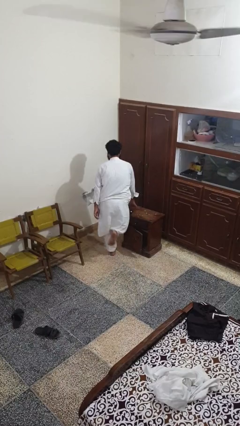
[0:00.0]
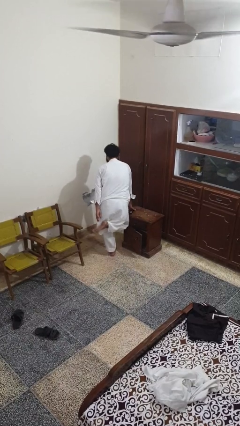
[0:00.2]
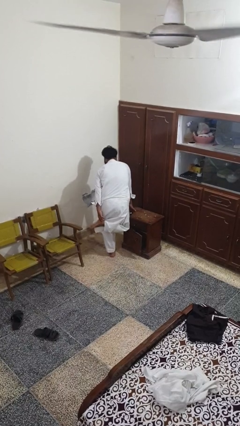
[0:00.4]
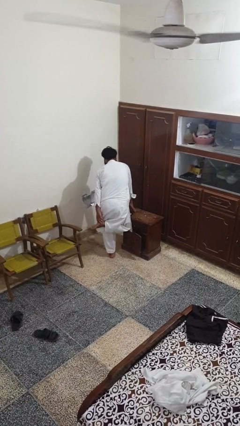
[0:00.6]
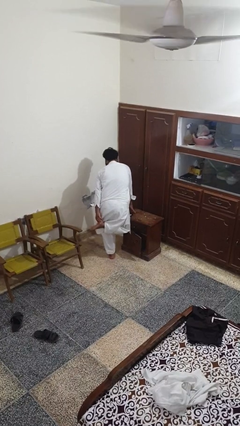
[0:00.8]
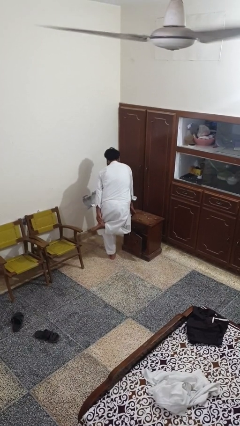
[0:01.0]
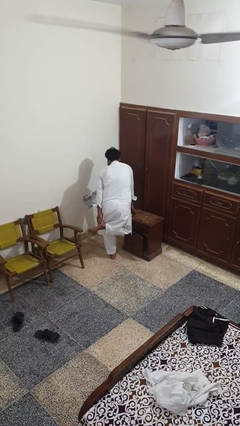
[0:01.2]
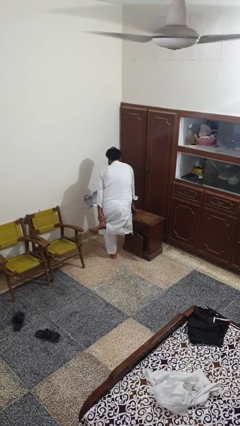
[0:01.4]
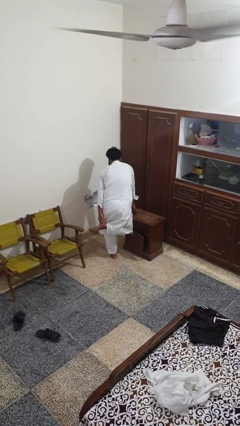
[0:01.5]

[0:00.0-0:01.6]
person stubs toe

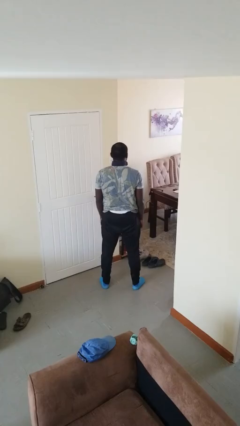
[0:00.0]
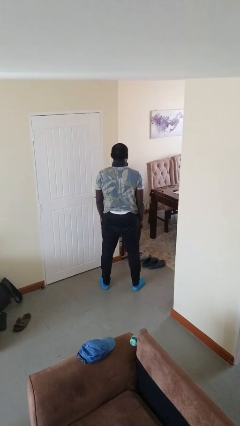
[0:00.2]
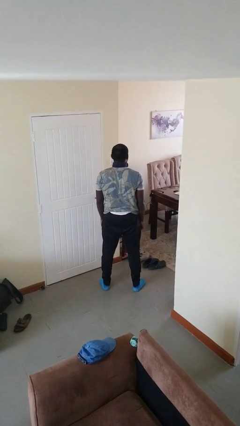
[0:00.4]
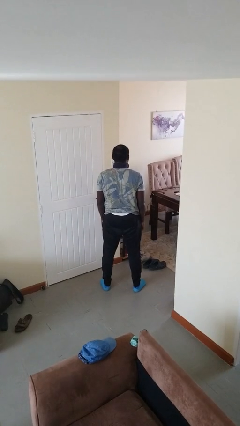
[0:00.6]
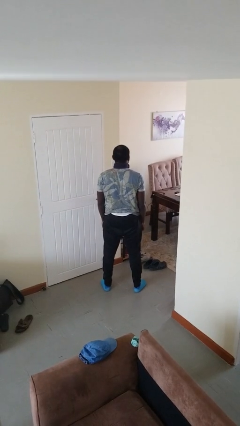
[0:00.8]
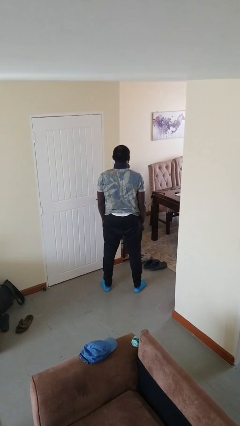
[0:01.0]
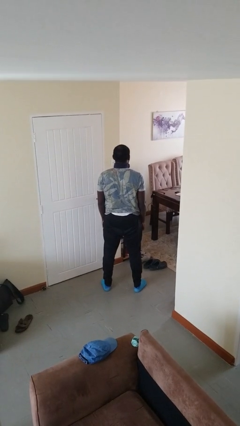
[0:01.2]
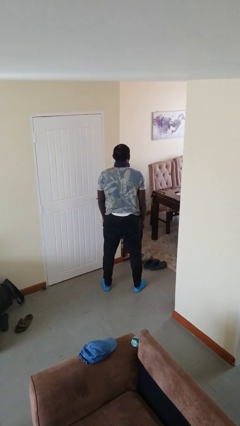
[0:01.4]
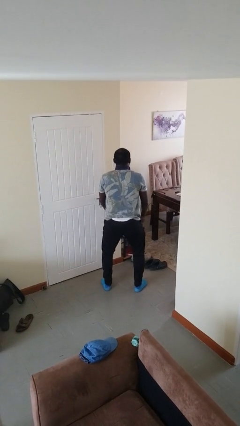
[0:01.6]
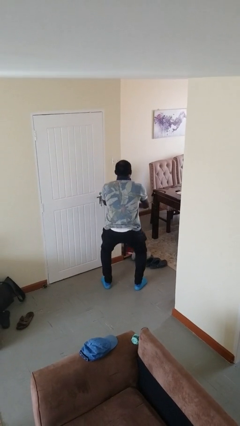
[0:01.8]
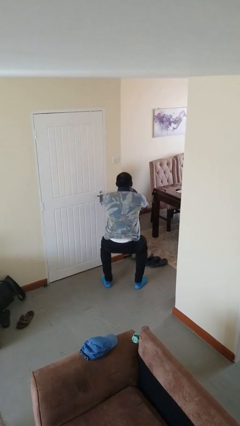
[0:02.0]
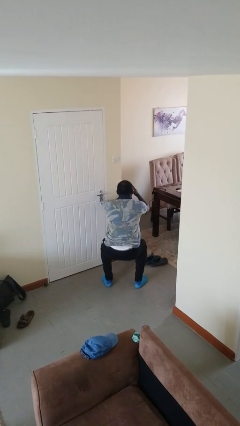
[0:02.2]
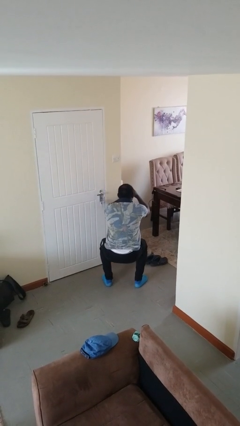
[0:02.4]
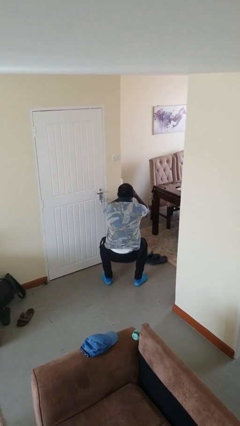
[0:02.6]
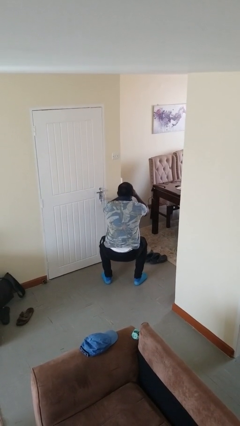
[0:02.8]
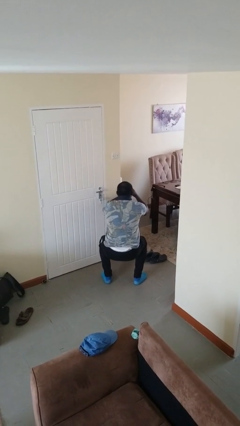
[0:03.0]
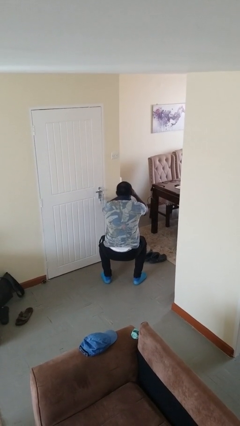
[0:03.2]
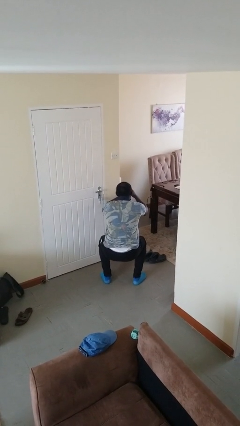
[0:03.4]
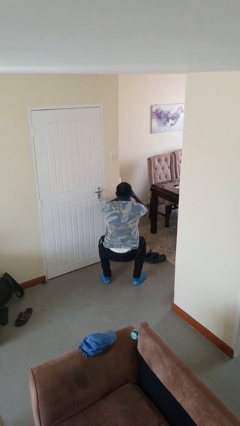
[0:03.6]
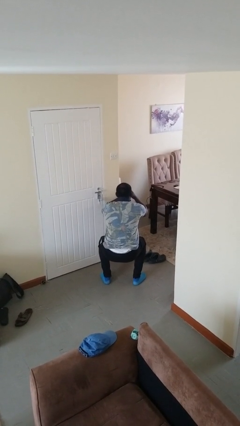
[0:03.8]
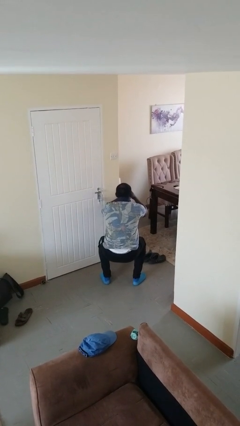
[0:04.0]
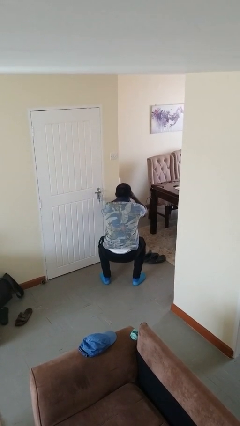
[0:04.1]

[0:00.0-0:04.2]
person squats

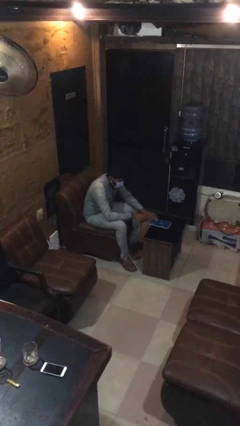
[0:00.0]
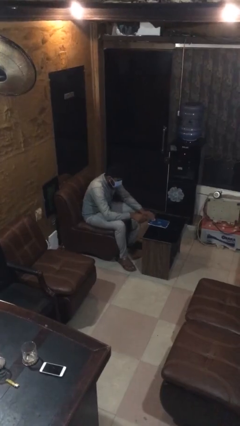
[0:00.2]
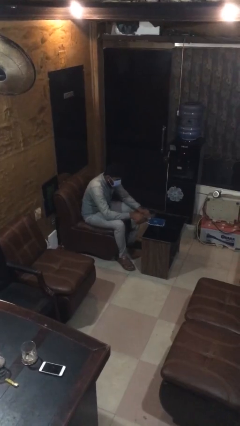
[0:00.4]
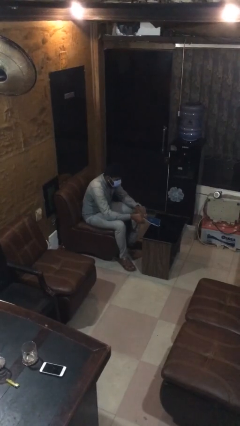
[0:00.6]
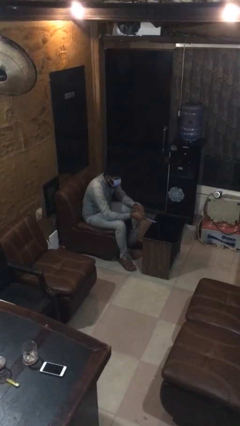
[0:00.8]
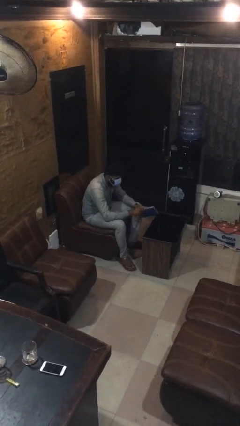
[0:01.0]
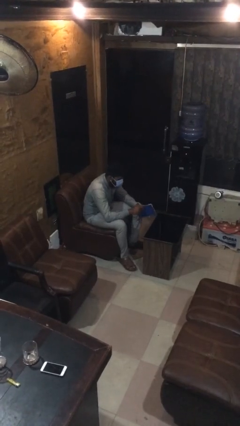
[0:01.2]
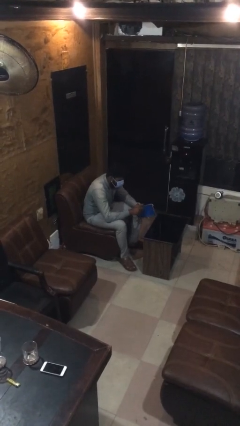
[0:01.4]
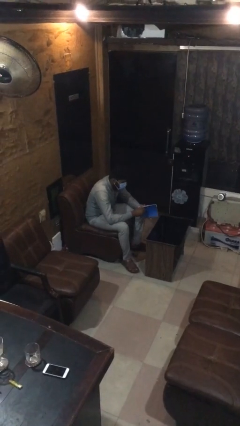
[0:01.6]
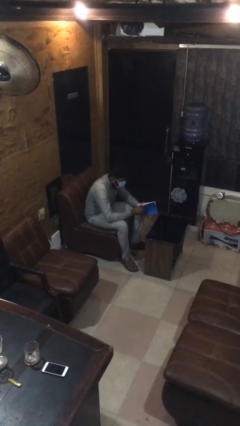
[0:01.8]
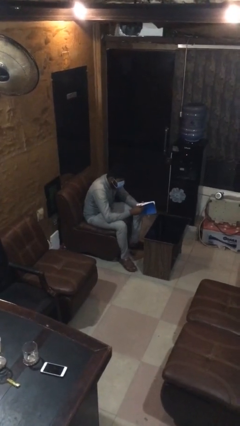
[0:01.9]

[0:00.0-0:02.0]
person picks up object from table

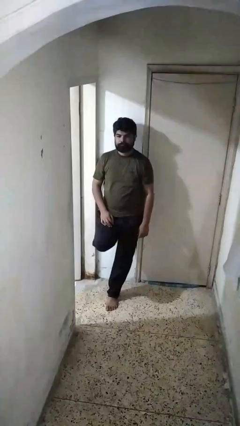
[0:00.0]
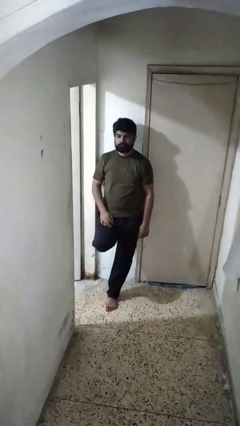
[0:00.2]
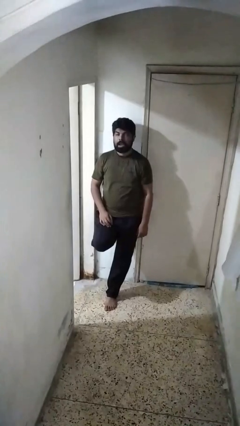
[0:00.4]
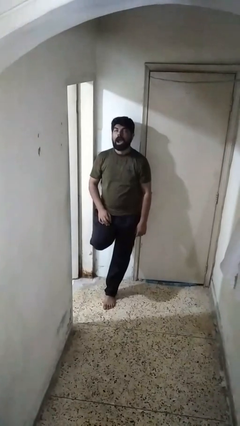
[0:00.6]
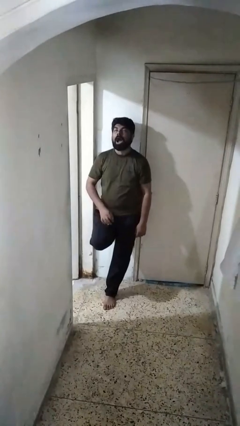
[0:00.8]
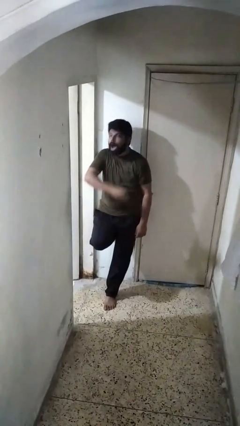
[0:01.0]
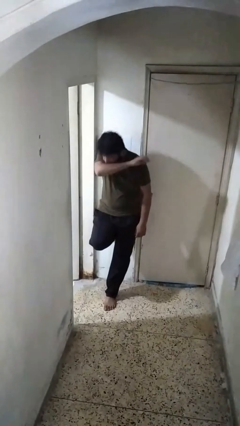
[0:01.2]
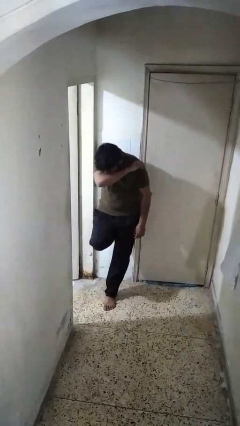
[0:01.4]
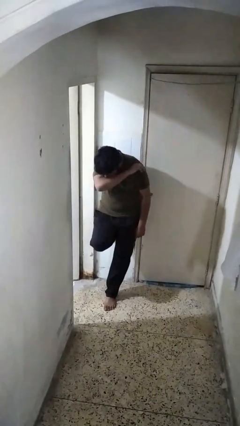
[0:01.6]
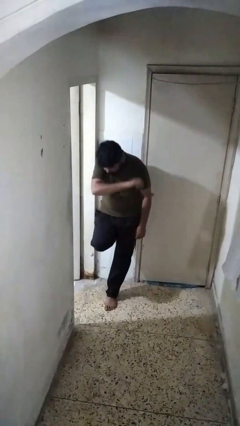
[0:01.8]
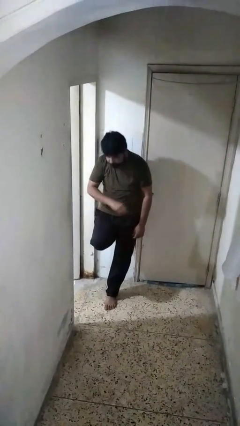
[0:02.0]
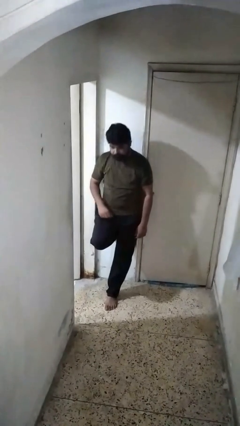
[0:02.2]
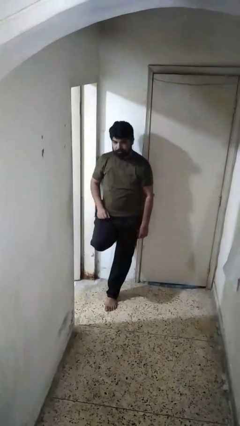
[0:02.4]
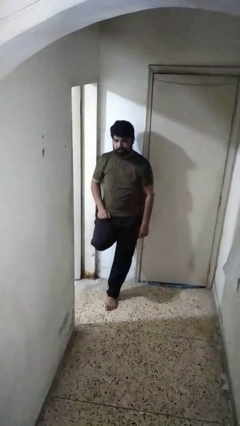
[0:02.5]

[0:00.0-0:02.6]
person sneezes into arm

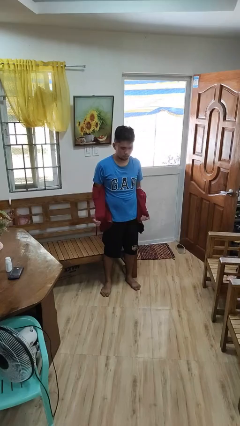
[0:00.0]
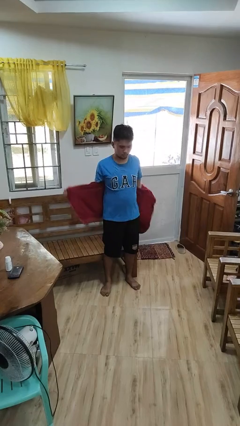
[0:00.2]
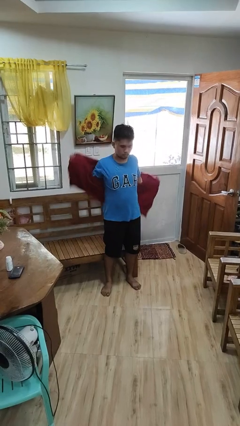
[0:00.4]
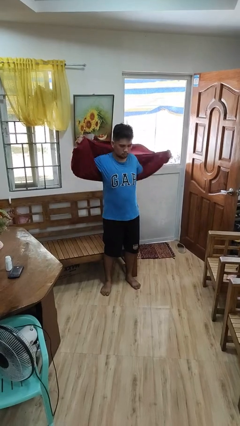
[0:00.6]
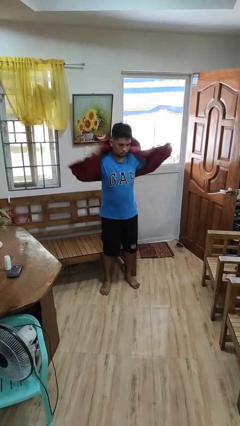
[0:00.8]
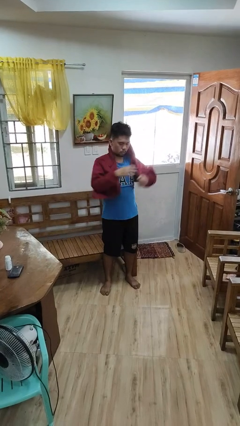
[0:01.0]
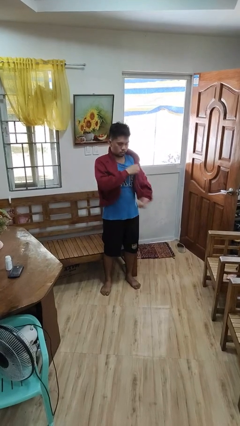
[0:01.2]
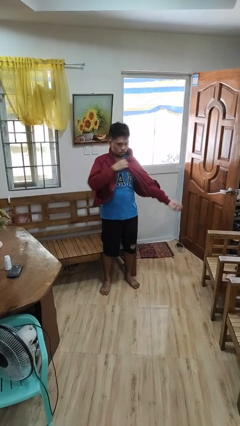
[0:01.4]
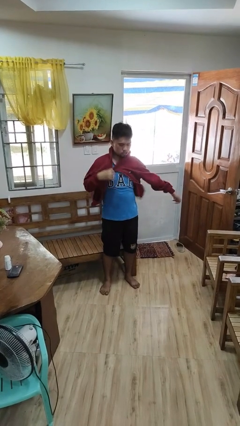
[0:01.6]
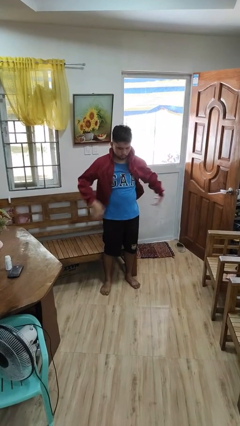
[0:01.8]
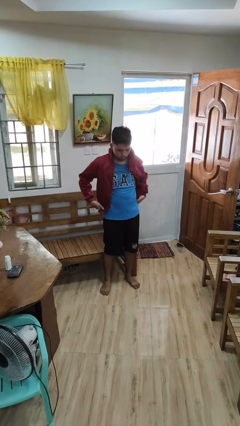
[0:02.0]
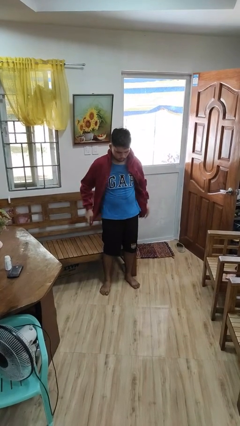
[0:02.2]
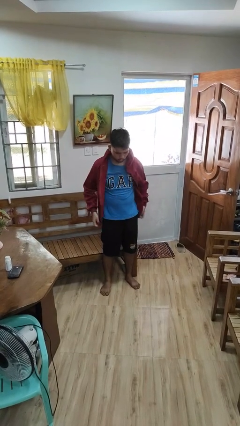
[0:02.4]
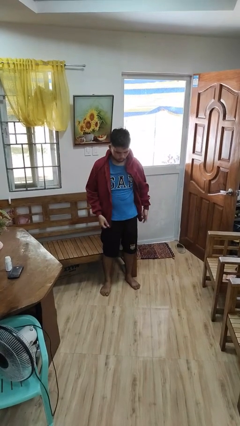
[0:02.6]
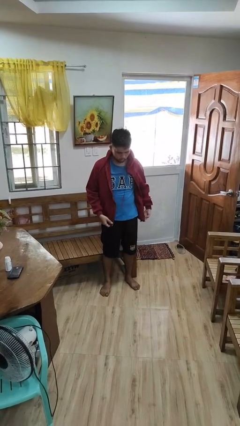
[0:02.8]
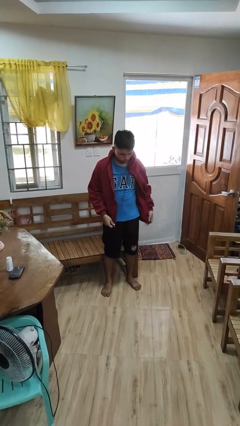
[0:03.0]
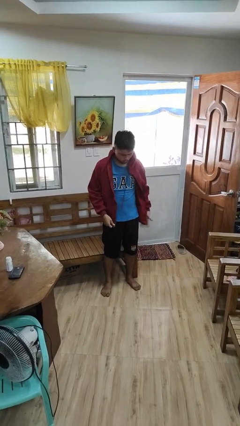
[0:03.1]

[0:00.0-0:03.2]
person puts on jacket

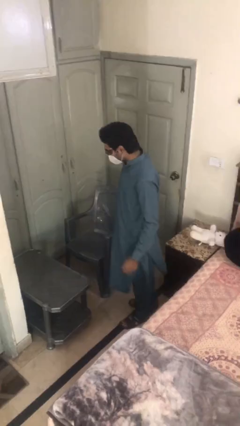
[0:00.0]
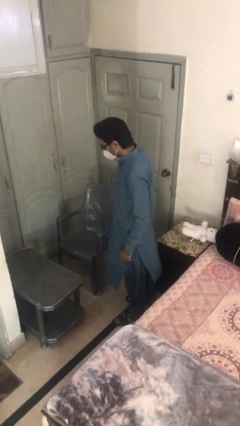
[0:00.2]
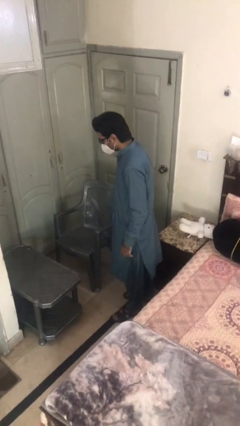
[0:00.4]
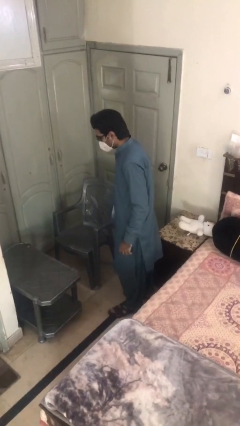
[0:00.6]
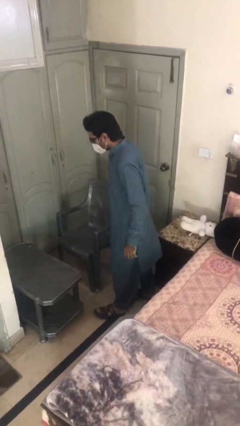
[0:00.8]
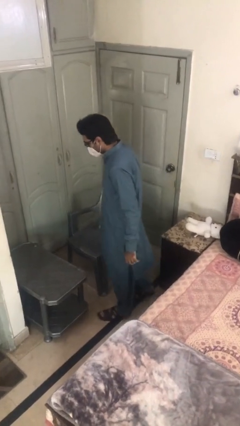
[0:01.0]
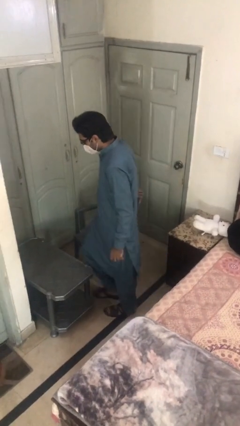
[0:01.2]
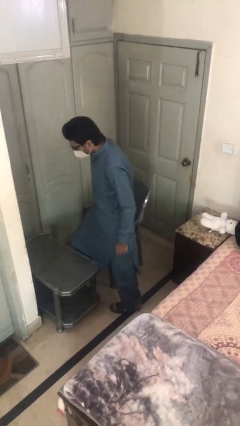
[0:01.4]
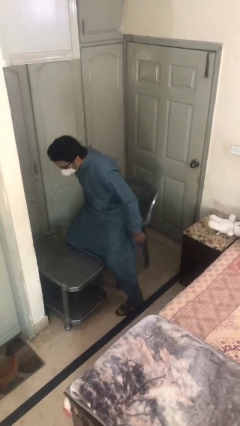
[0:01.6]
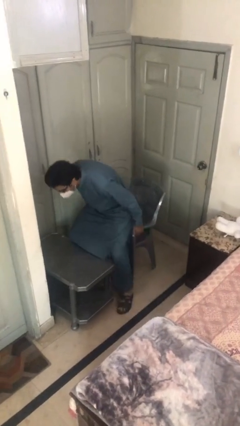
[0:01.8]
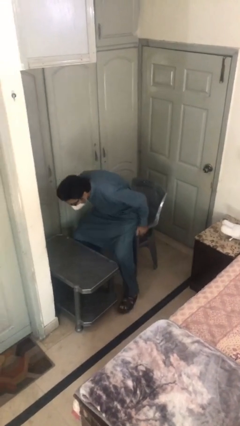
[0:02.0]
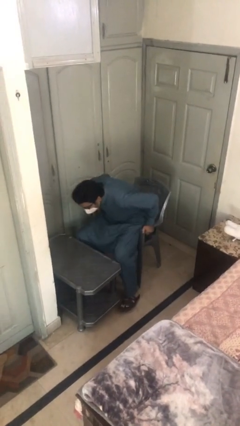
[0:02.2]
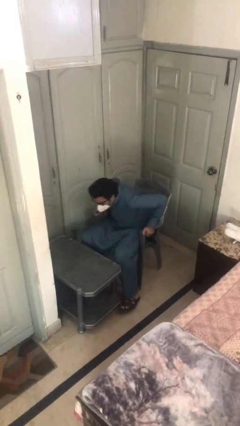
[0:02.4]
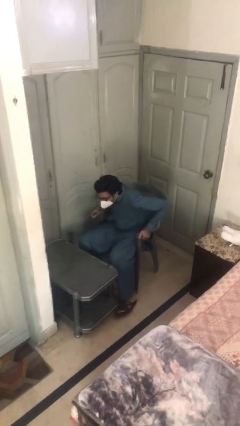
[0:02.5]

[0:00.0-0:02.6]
person sits down

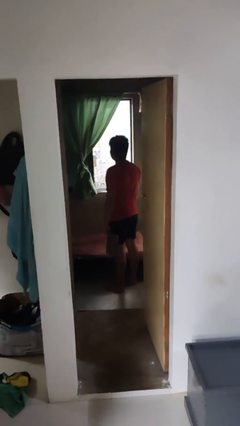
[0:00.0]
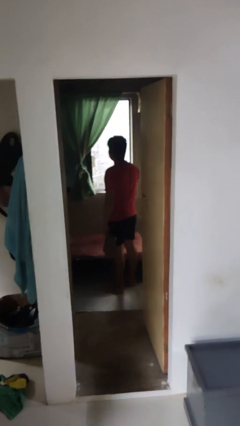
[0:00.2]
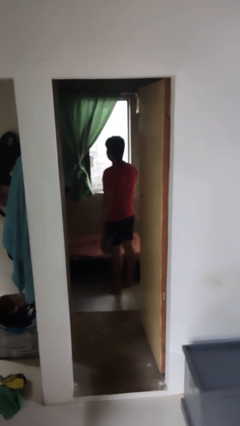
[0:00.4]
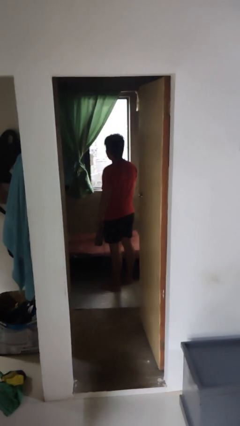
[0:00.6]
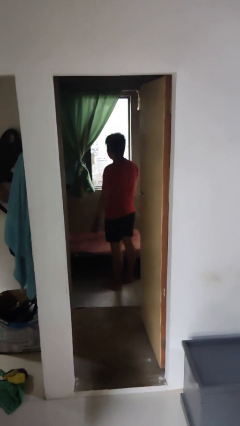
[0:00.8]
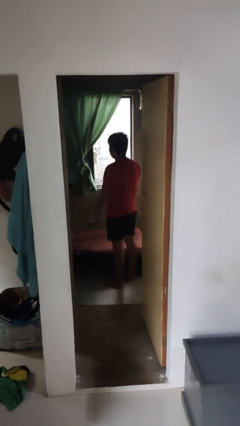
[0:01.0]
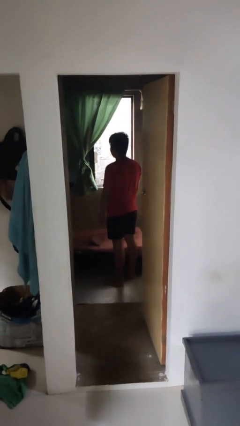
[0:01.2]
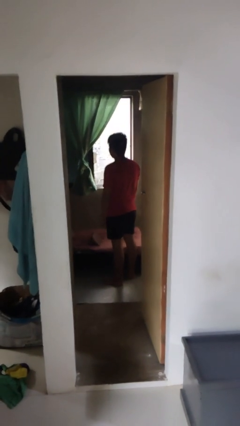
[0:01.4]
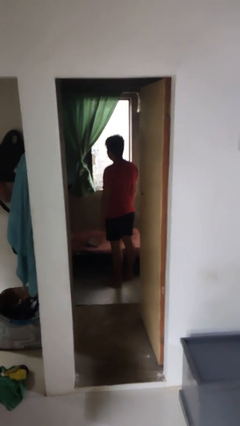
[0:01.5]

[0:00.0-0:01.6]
person throws object on bed
